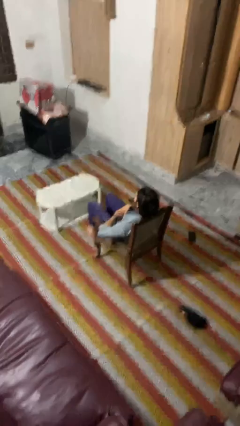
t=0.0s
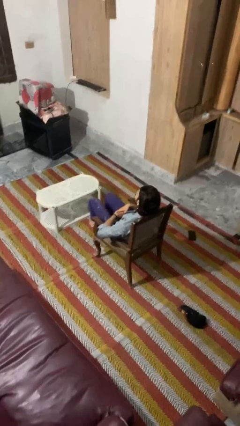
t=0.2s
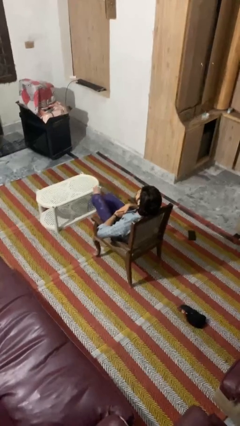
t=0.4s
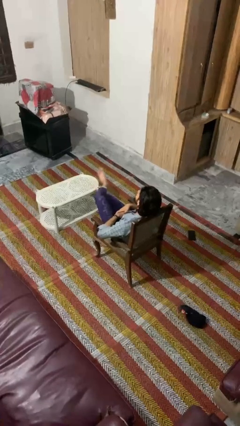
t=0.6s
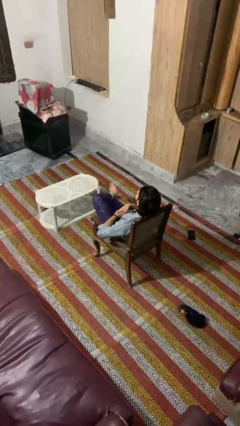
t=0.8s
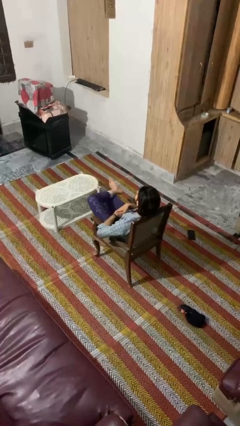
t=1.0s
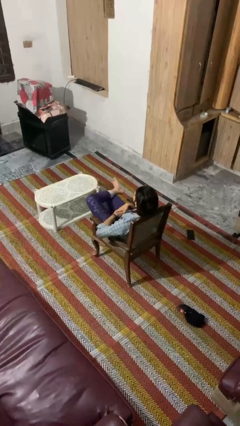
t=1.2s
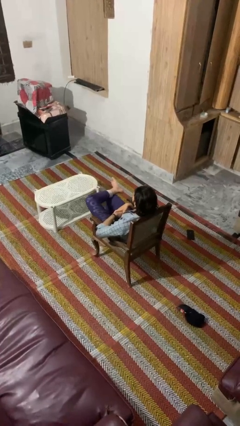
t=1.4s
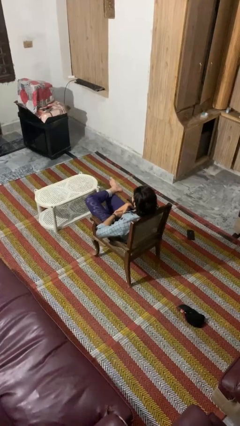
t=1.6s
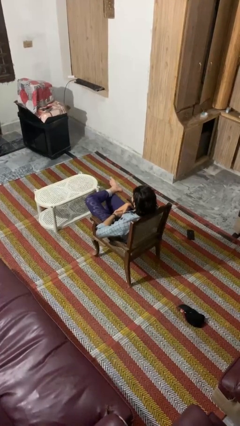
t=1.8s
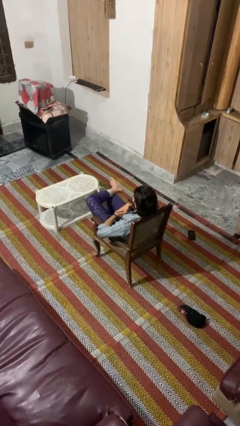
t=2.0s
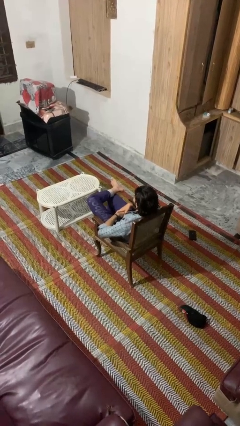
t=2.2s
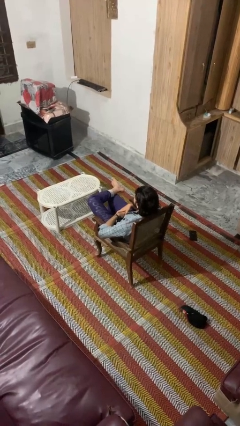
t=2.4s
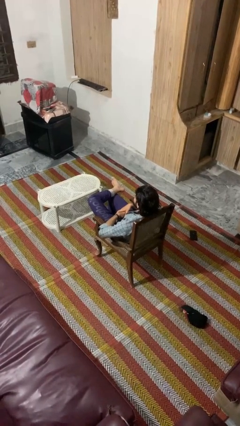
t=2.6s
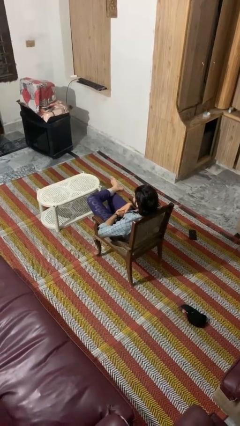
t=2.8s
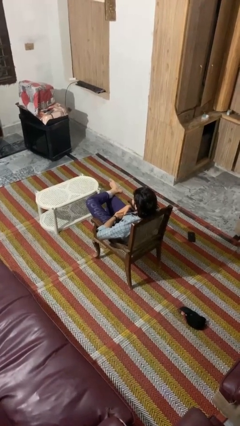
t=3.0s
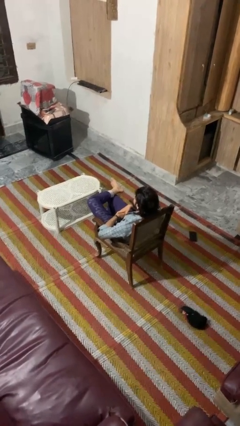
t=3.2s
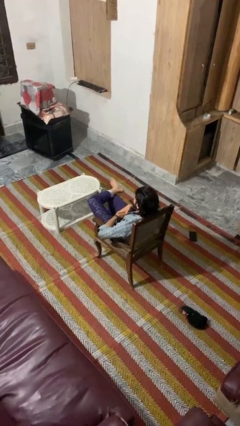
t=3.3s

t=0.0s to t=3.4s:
person crosses legs

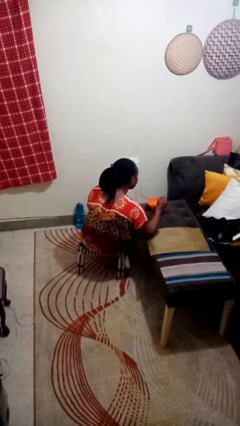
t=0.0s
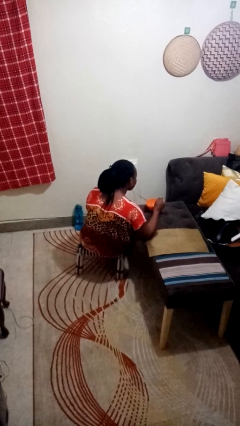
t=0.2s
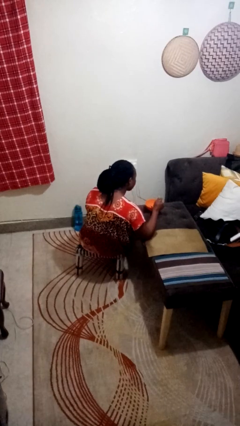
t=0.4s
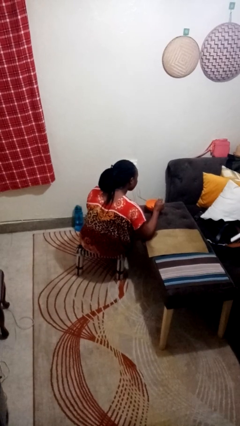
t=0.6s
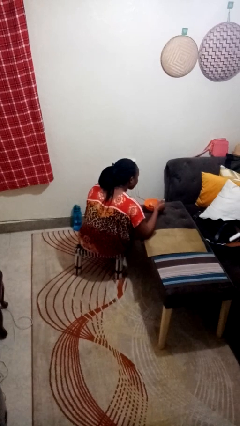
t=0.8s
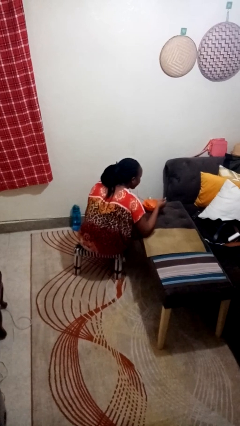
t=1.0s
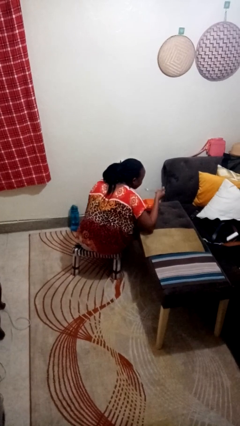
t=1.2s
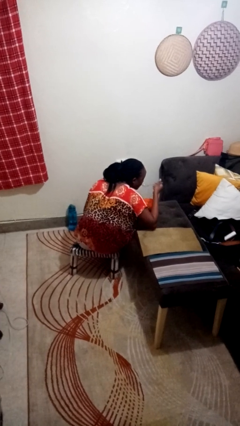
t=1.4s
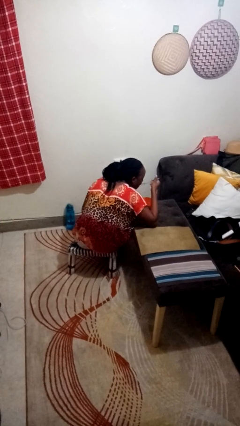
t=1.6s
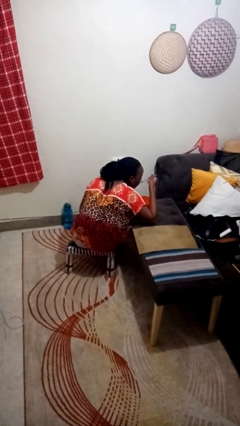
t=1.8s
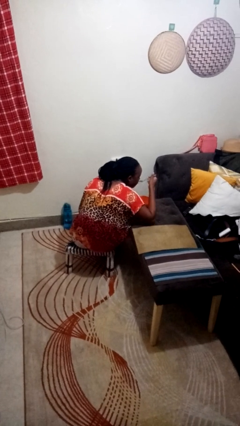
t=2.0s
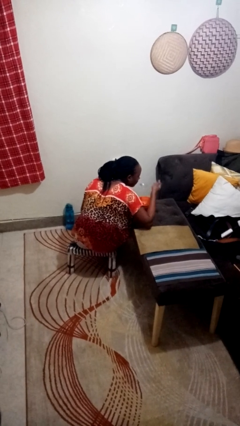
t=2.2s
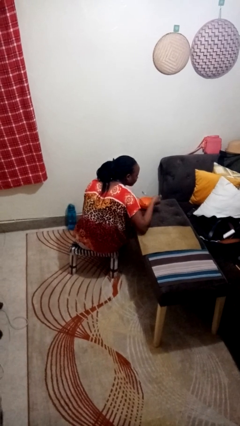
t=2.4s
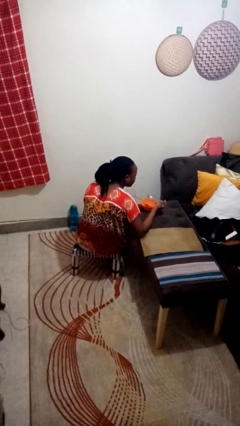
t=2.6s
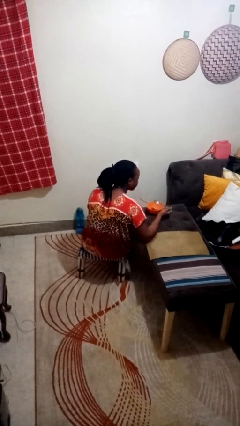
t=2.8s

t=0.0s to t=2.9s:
person eats with utensil

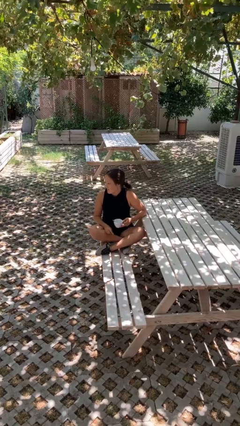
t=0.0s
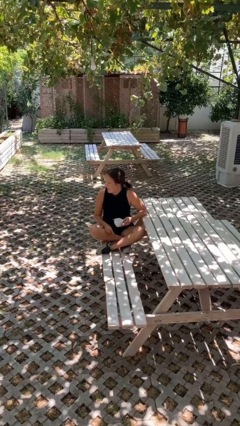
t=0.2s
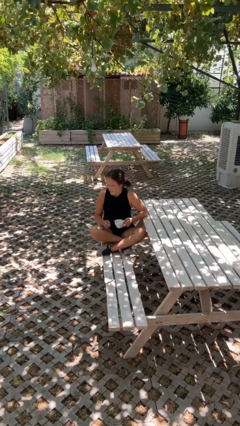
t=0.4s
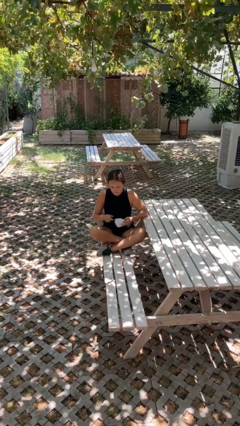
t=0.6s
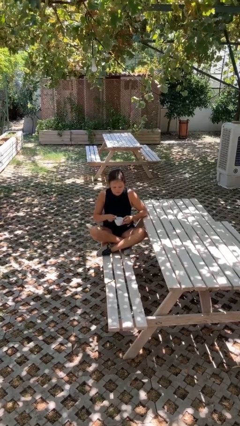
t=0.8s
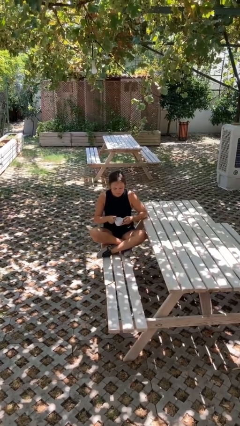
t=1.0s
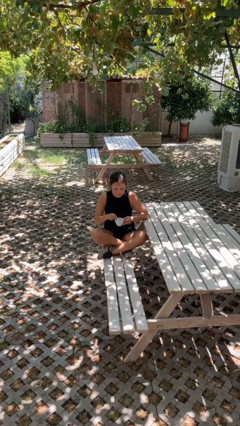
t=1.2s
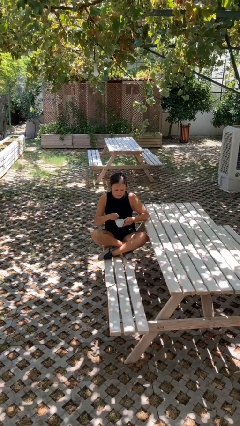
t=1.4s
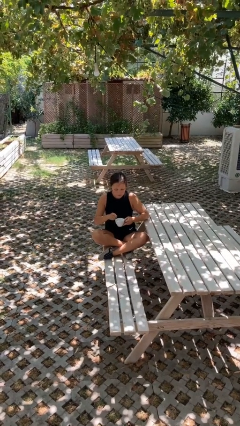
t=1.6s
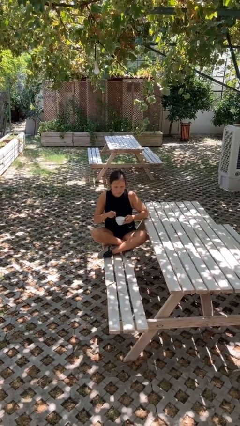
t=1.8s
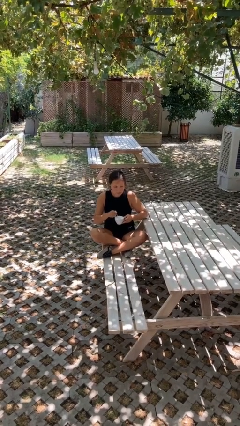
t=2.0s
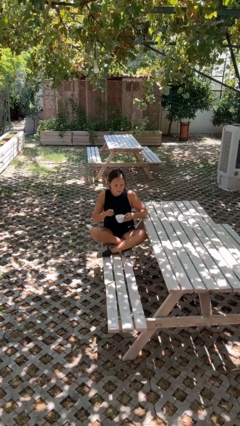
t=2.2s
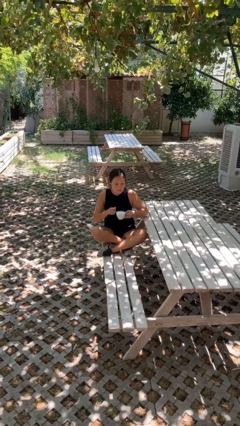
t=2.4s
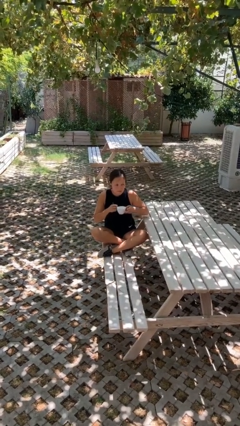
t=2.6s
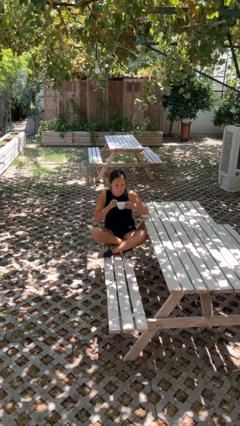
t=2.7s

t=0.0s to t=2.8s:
person stirs mug

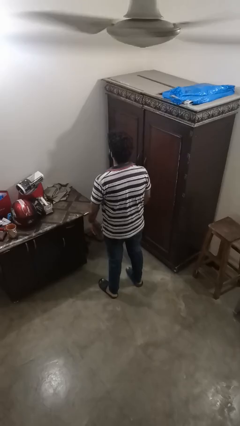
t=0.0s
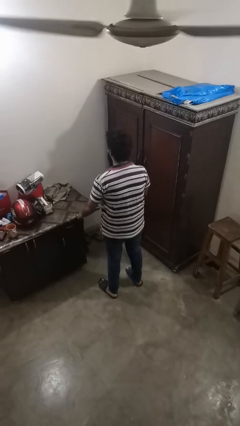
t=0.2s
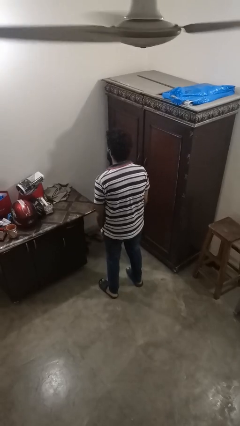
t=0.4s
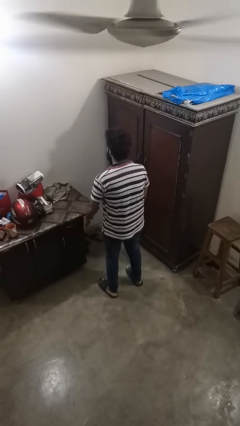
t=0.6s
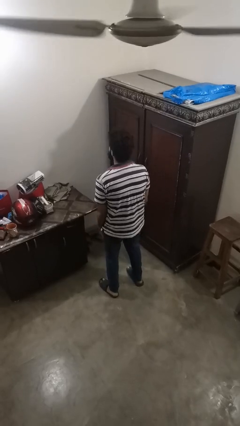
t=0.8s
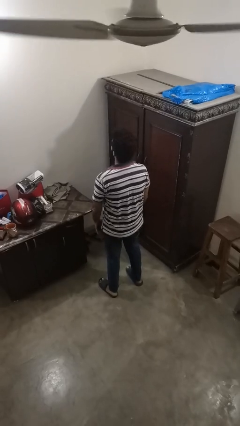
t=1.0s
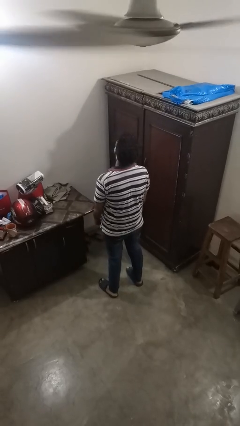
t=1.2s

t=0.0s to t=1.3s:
person slaps hands on thighs

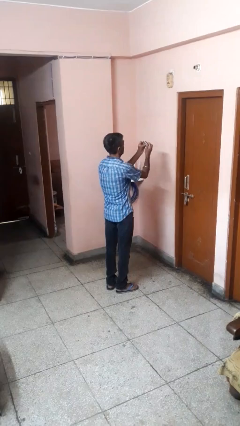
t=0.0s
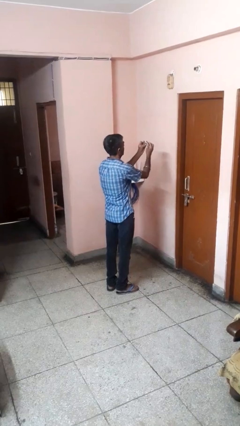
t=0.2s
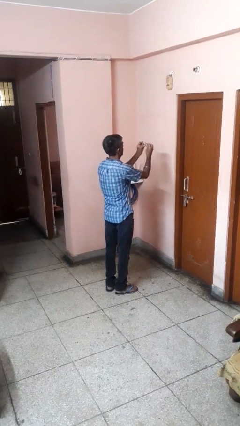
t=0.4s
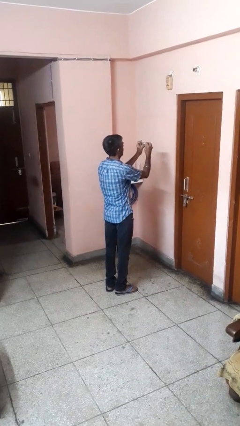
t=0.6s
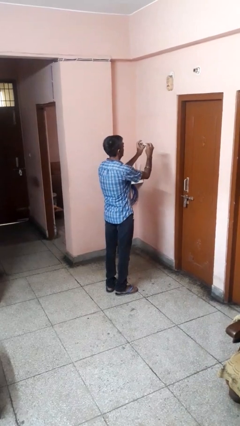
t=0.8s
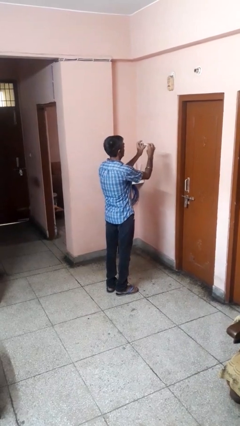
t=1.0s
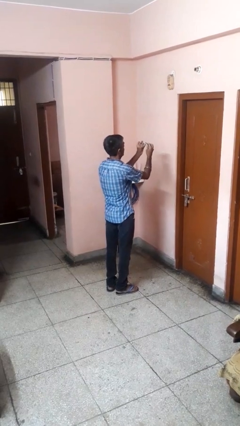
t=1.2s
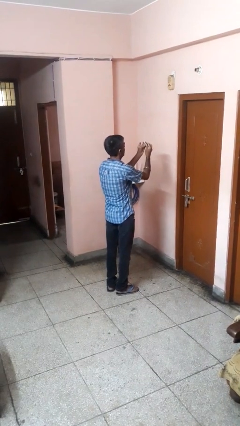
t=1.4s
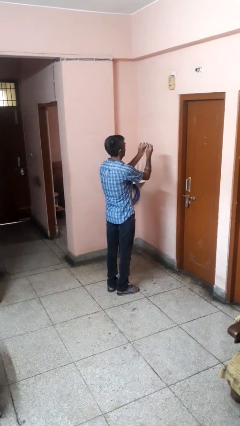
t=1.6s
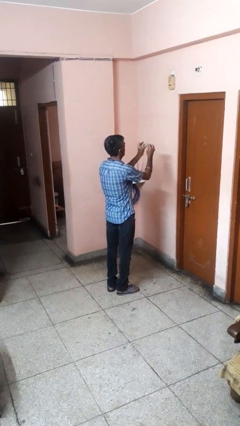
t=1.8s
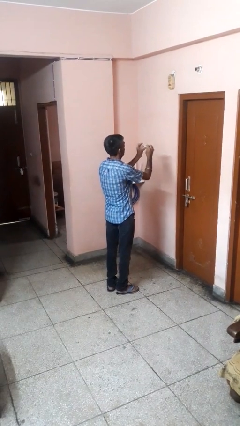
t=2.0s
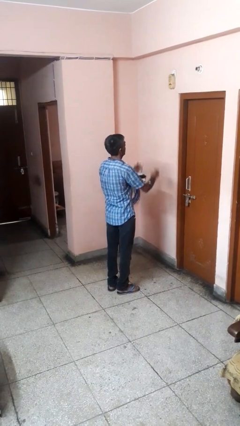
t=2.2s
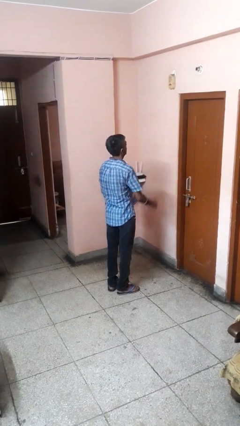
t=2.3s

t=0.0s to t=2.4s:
person files fingernails

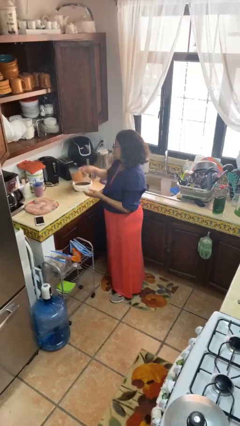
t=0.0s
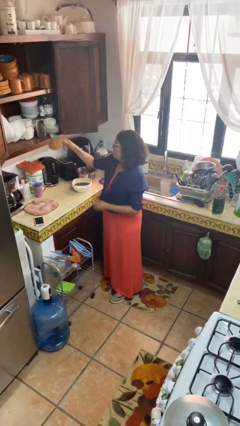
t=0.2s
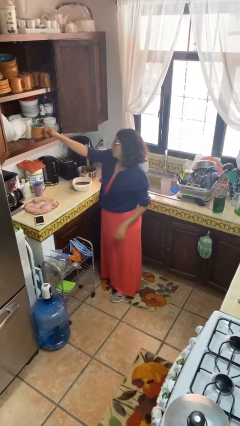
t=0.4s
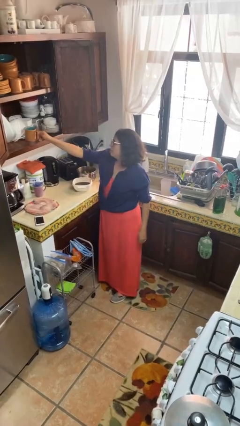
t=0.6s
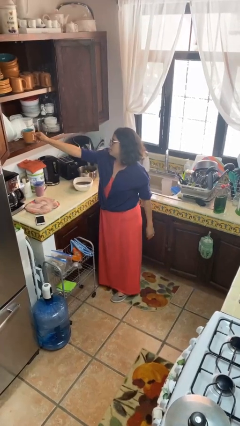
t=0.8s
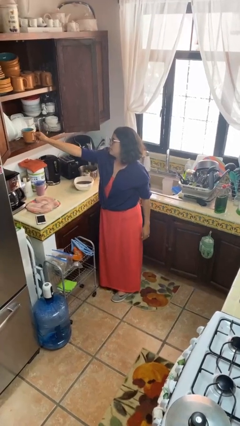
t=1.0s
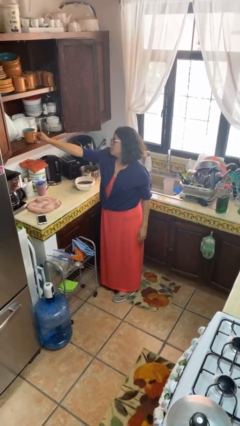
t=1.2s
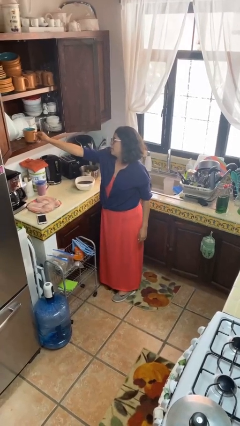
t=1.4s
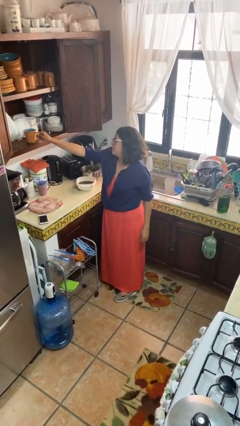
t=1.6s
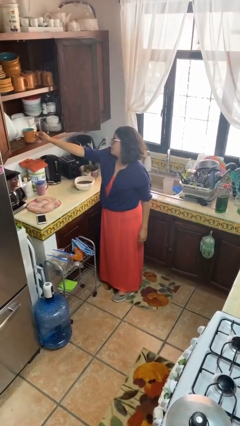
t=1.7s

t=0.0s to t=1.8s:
person puts down object into cabinet

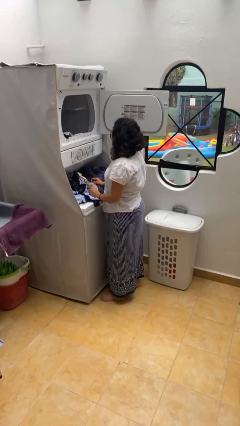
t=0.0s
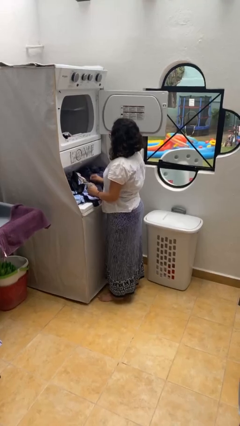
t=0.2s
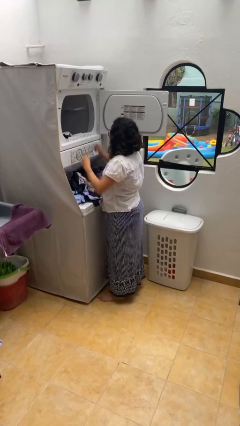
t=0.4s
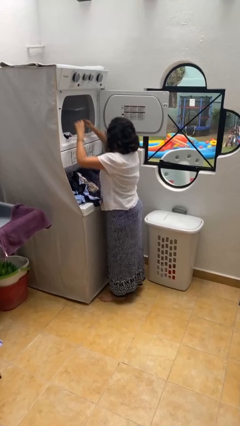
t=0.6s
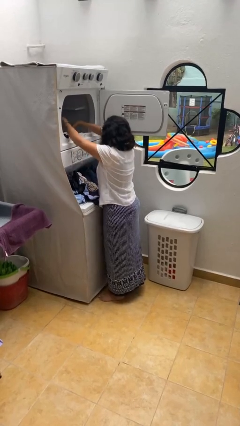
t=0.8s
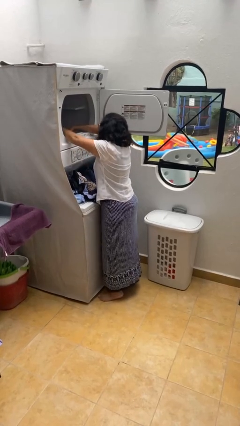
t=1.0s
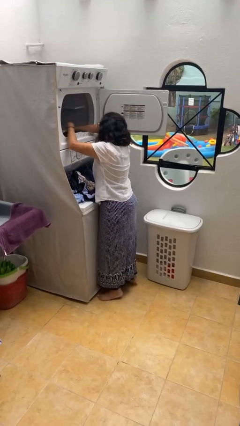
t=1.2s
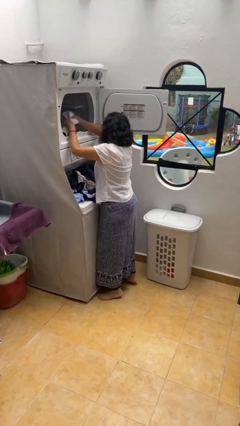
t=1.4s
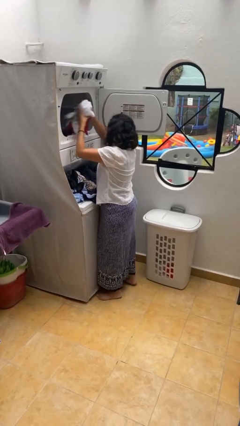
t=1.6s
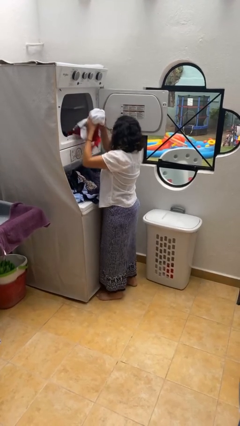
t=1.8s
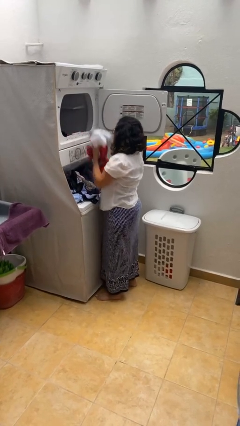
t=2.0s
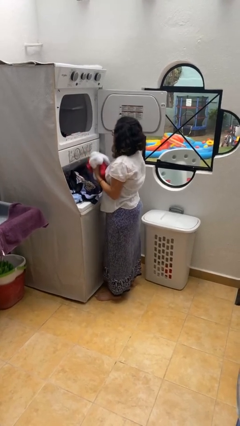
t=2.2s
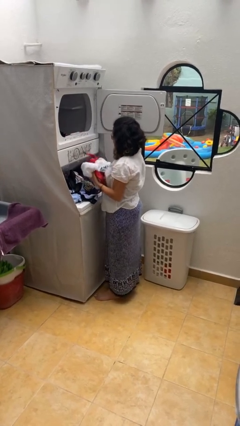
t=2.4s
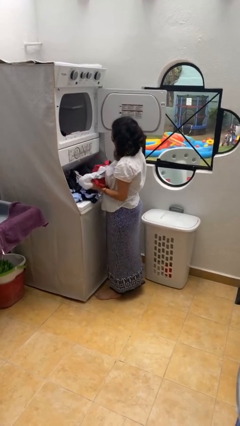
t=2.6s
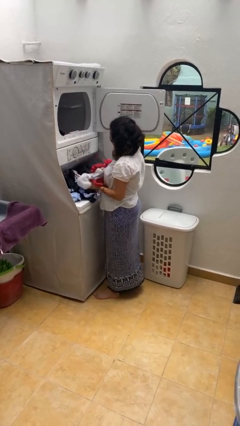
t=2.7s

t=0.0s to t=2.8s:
person unloads dryer
